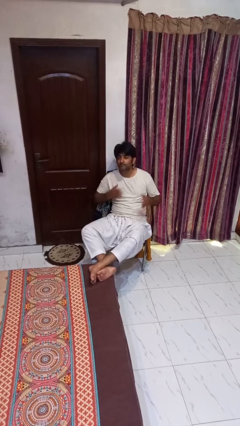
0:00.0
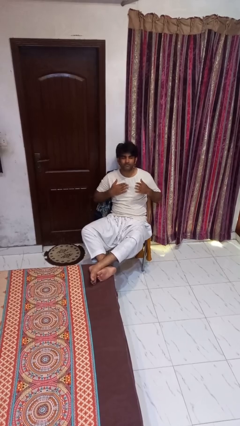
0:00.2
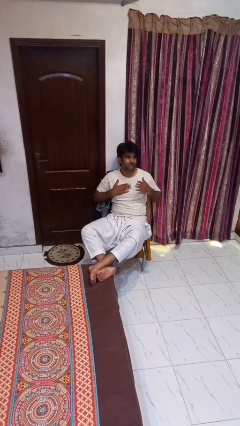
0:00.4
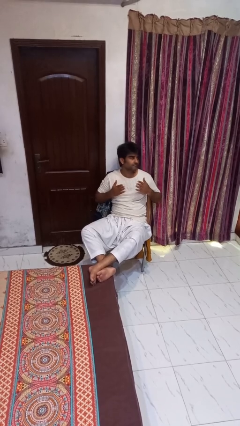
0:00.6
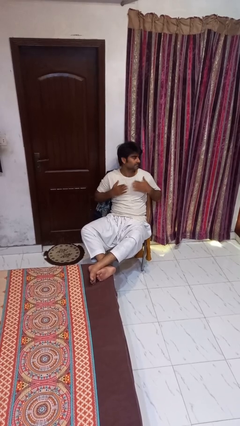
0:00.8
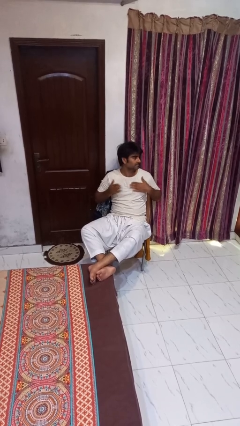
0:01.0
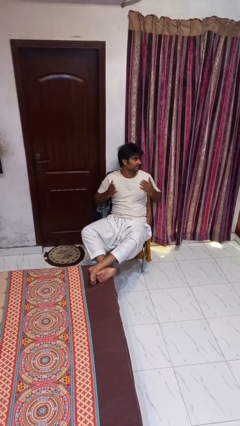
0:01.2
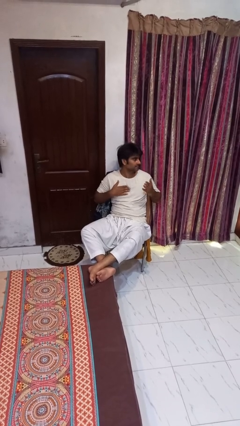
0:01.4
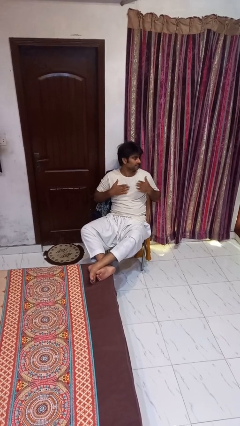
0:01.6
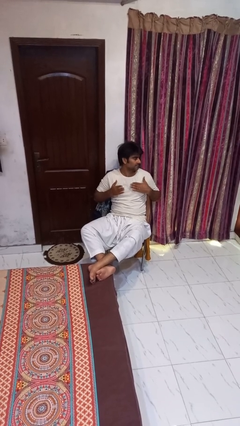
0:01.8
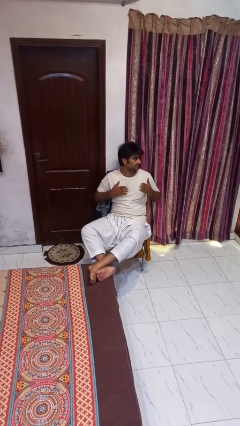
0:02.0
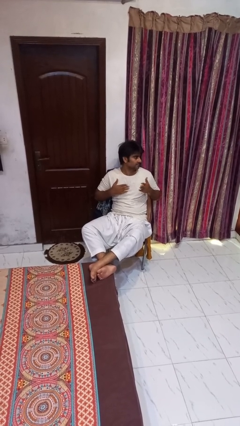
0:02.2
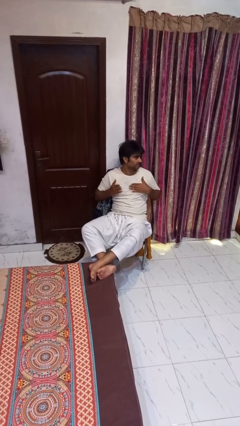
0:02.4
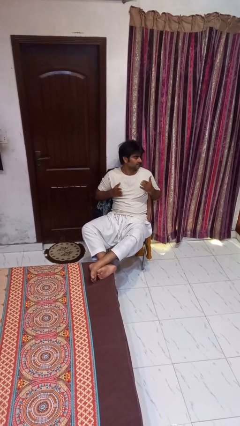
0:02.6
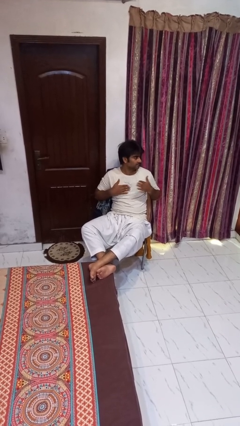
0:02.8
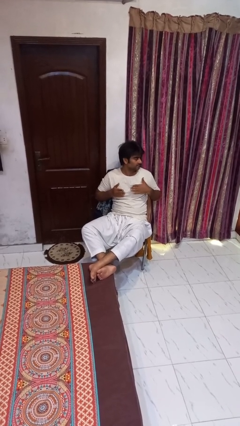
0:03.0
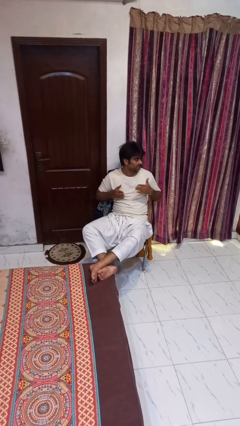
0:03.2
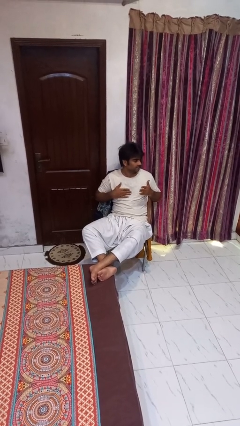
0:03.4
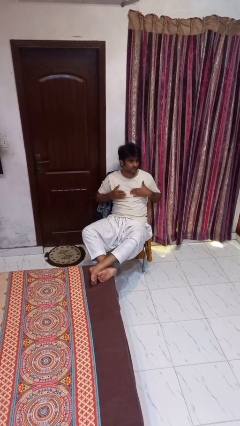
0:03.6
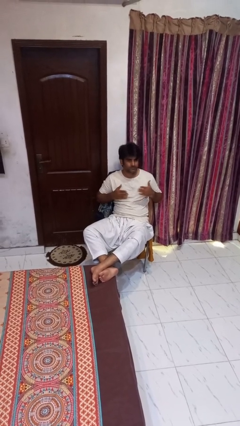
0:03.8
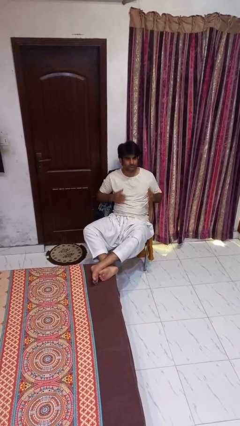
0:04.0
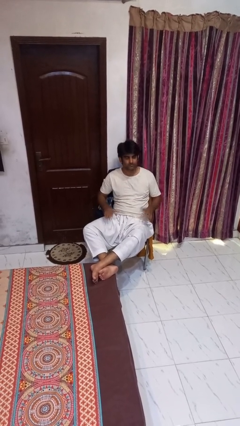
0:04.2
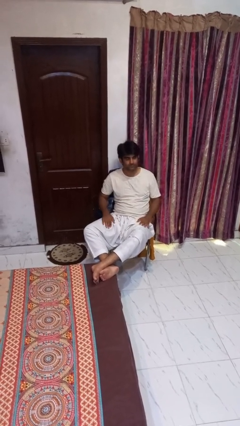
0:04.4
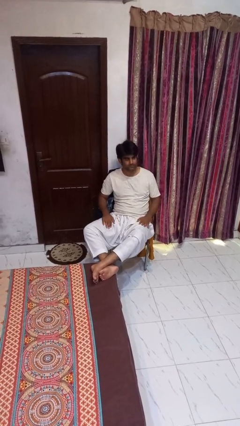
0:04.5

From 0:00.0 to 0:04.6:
person drums on chest

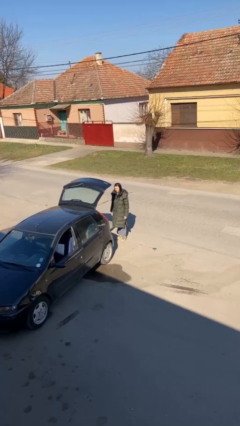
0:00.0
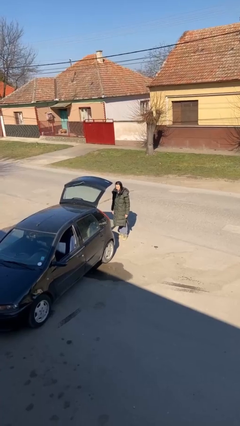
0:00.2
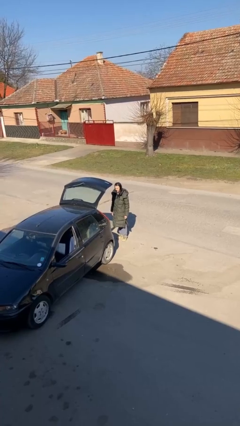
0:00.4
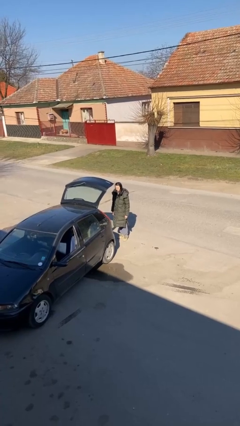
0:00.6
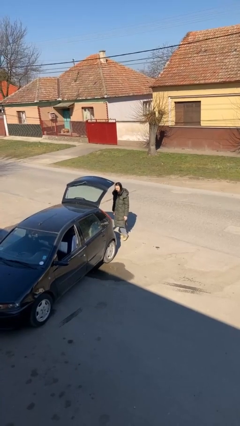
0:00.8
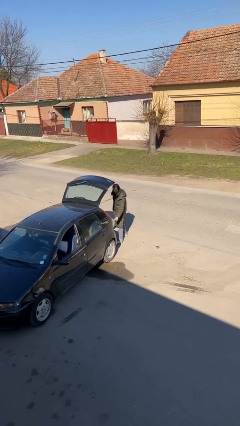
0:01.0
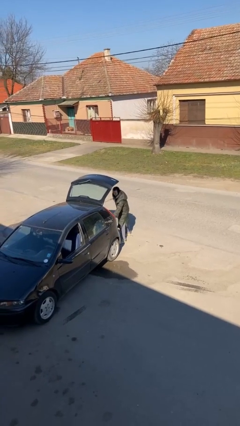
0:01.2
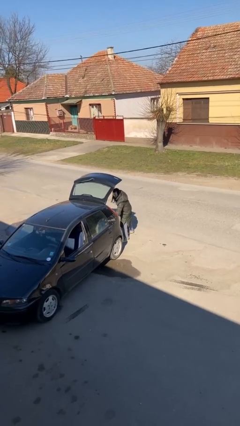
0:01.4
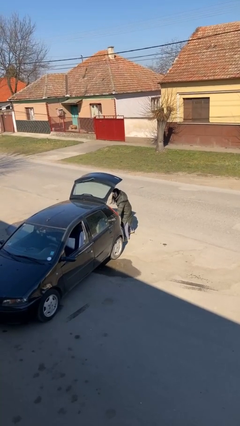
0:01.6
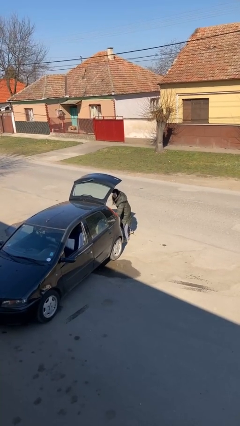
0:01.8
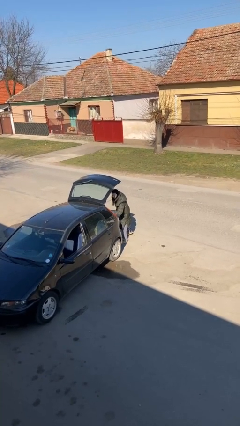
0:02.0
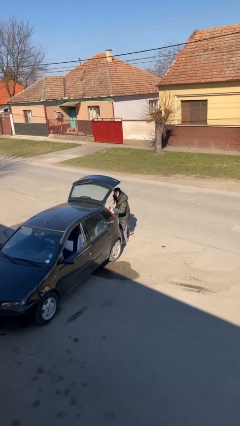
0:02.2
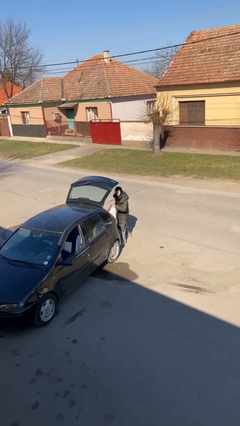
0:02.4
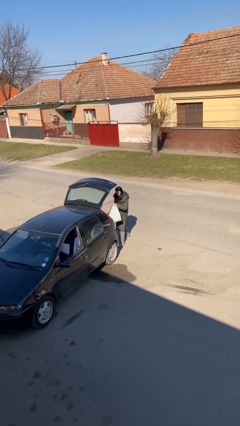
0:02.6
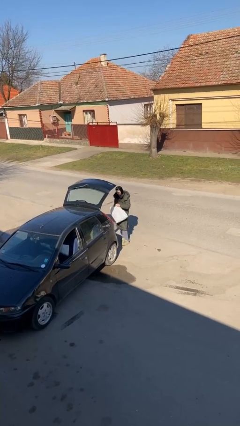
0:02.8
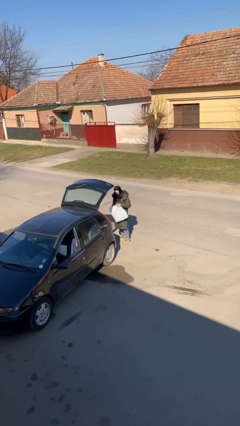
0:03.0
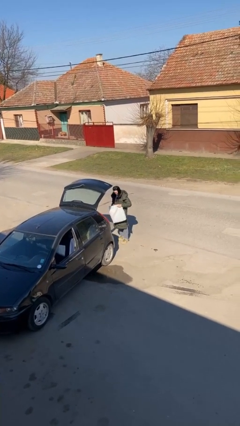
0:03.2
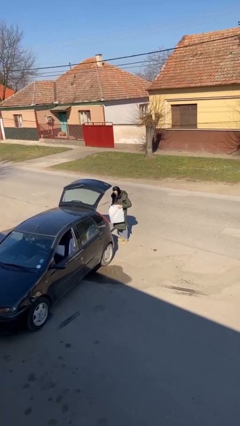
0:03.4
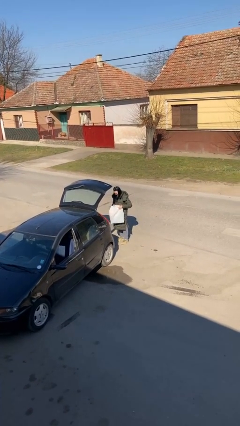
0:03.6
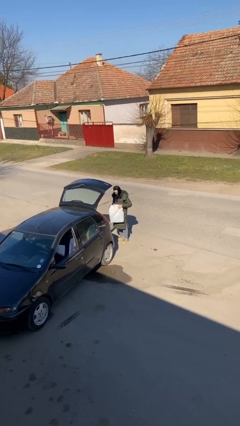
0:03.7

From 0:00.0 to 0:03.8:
person unloads car

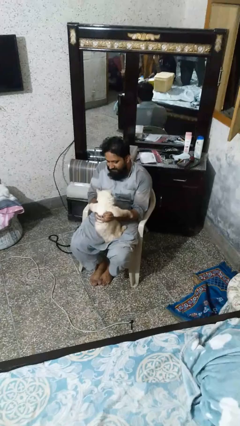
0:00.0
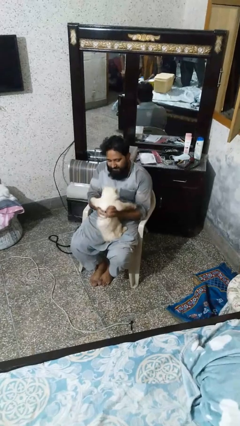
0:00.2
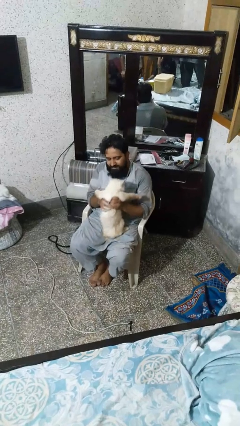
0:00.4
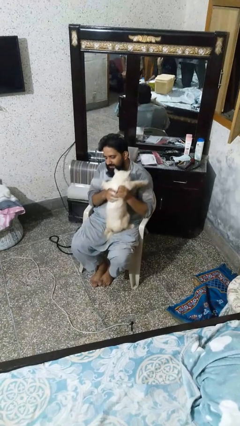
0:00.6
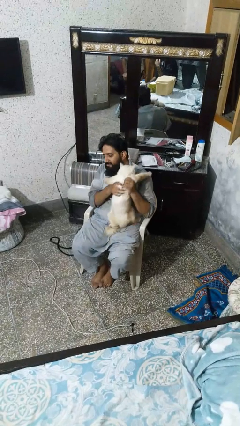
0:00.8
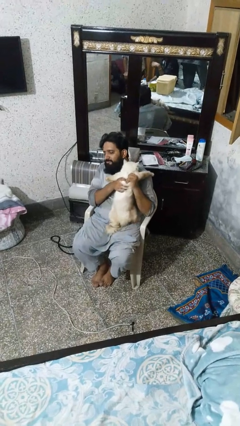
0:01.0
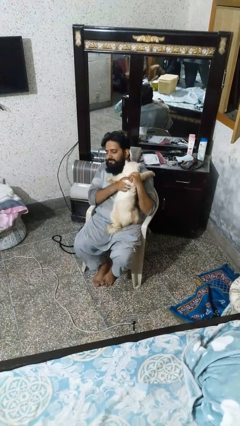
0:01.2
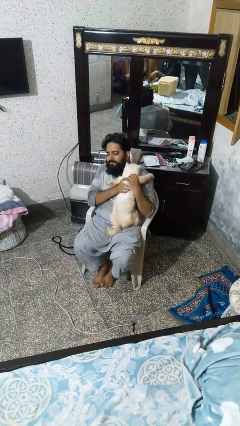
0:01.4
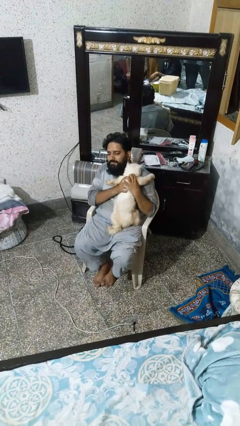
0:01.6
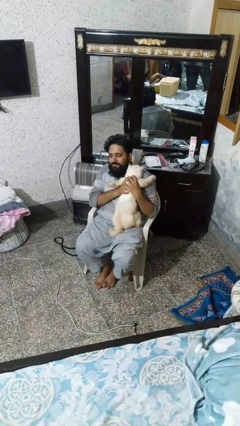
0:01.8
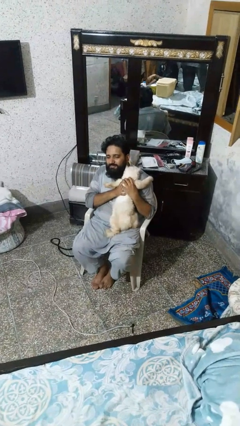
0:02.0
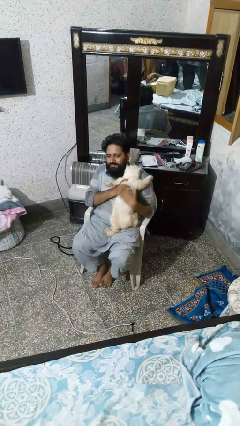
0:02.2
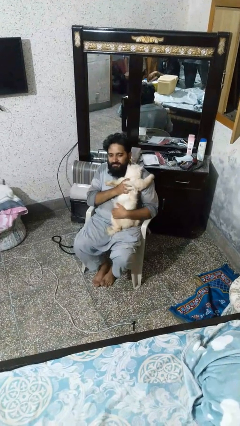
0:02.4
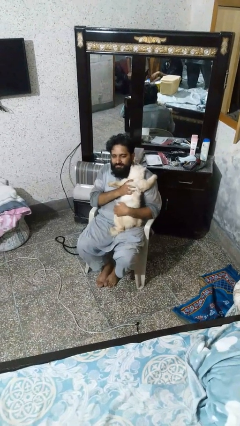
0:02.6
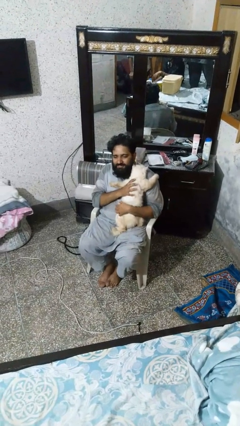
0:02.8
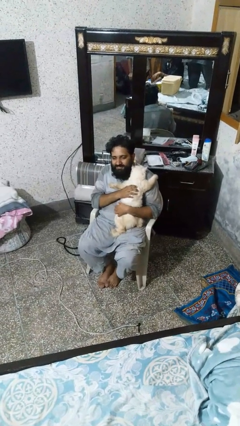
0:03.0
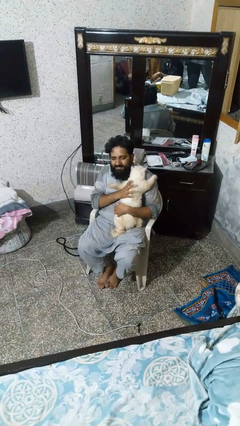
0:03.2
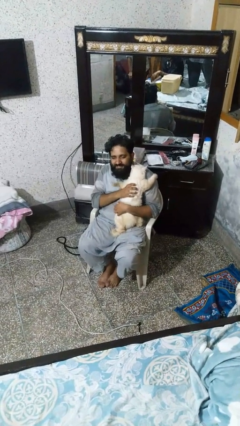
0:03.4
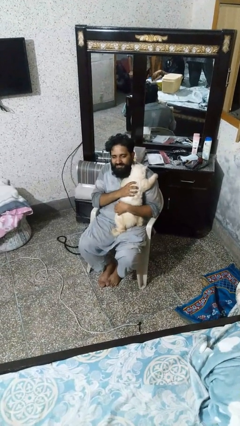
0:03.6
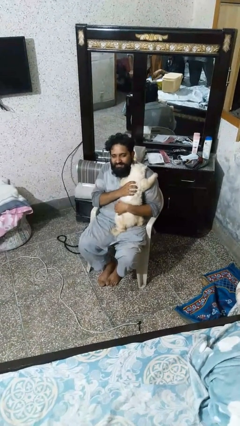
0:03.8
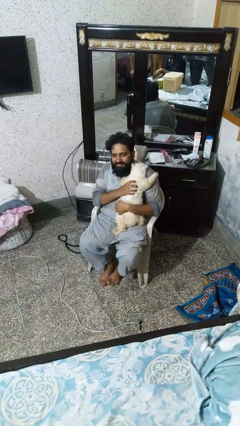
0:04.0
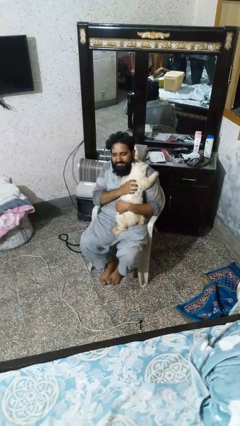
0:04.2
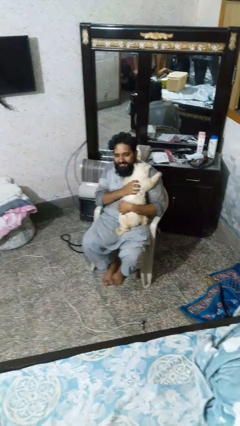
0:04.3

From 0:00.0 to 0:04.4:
person hugs cat

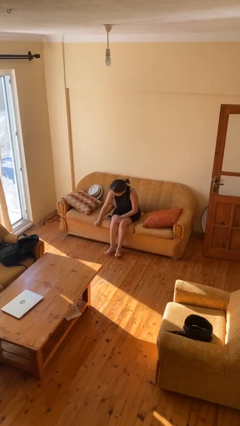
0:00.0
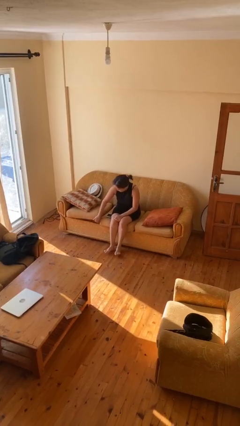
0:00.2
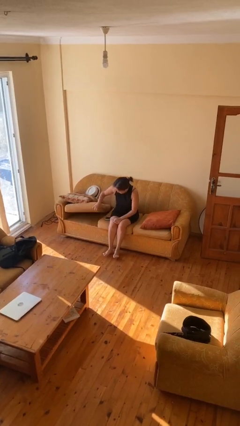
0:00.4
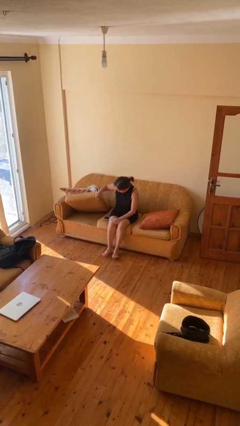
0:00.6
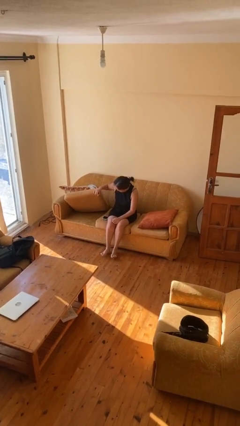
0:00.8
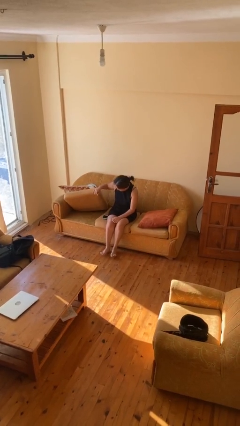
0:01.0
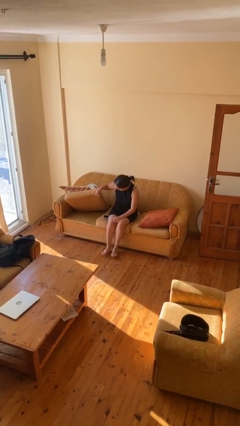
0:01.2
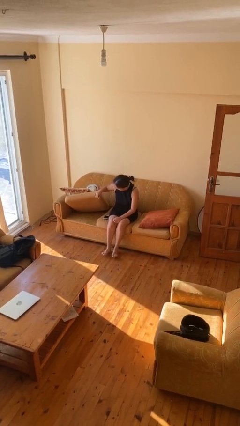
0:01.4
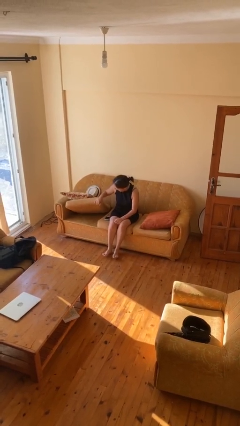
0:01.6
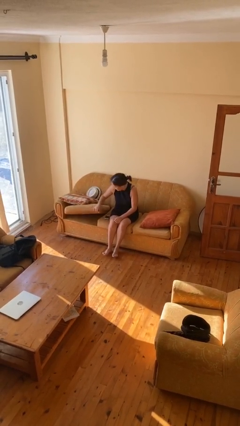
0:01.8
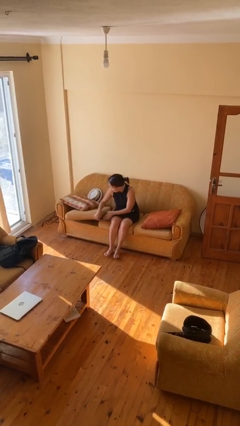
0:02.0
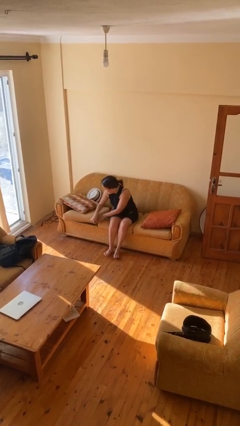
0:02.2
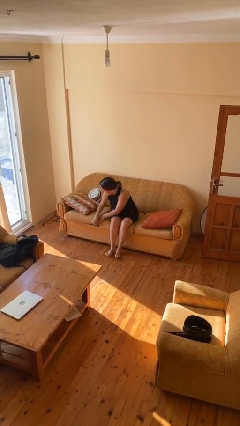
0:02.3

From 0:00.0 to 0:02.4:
person searches in couch

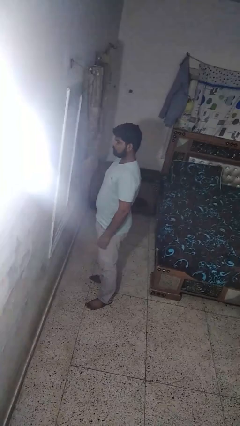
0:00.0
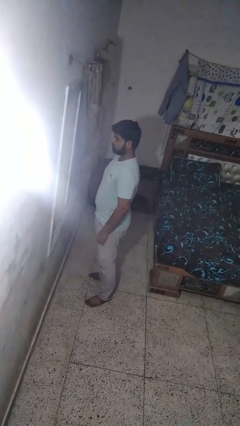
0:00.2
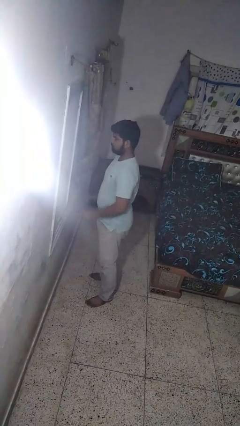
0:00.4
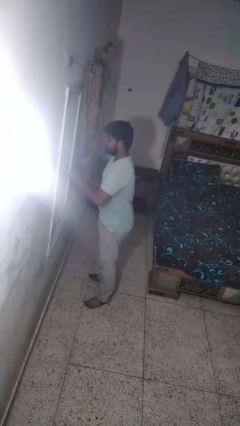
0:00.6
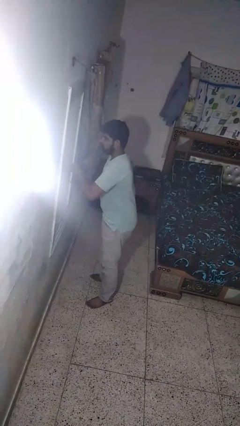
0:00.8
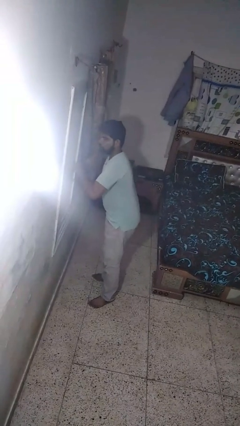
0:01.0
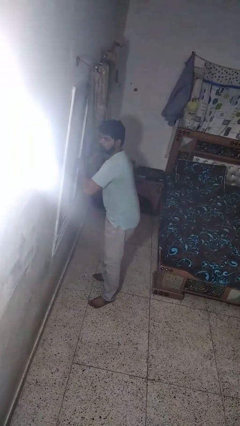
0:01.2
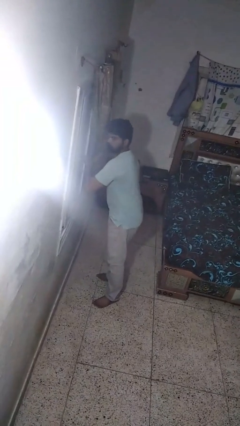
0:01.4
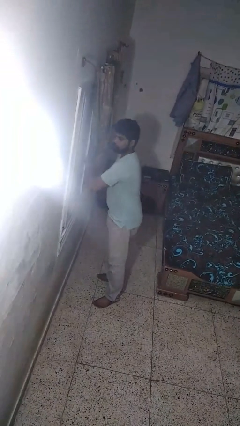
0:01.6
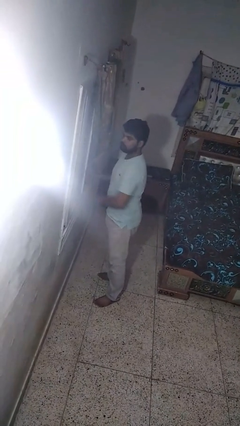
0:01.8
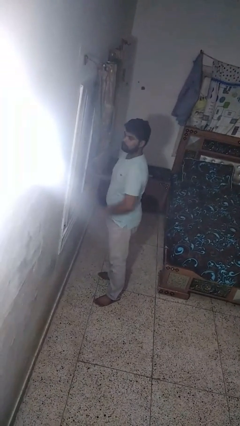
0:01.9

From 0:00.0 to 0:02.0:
person opens sliding door

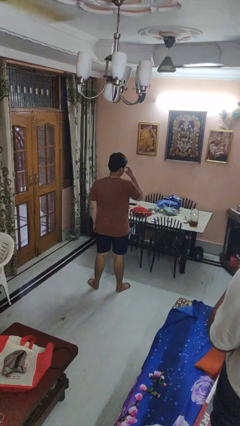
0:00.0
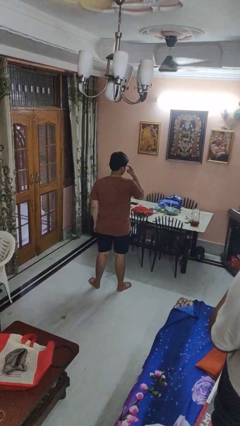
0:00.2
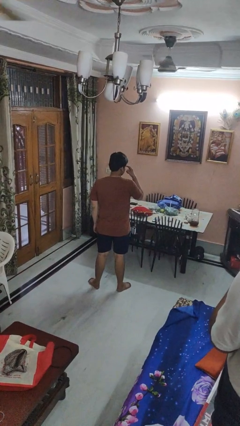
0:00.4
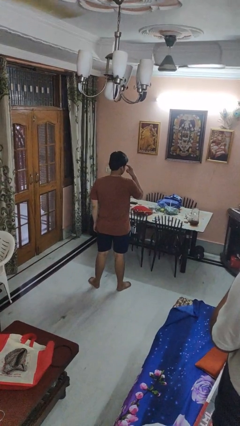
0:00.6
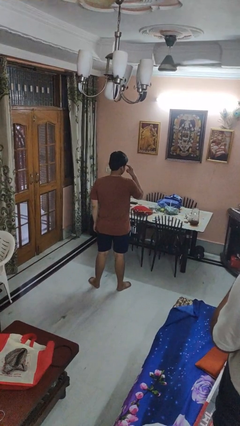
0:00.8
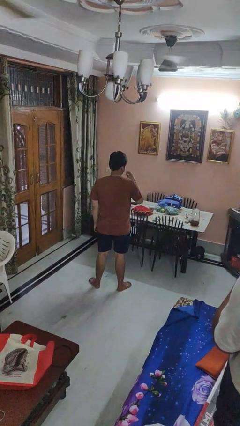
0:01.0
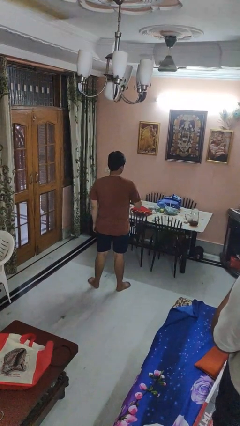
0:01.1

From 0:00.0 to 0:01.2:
person gestures watch closely
